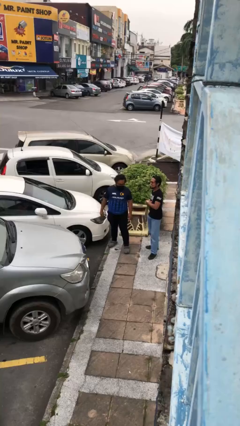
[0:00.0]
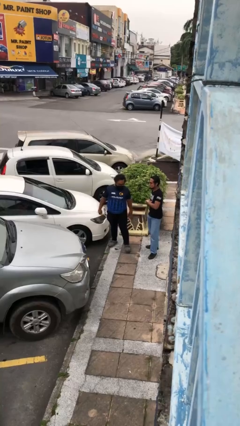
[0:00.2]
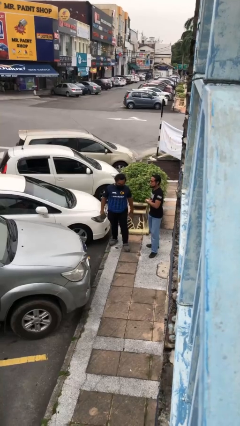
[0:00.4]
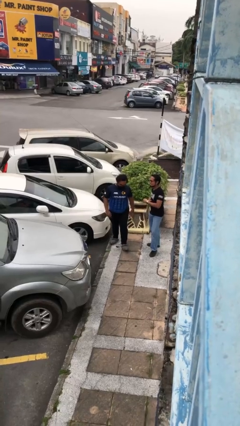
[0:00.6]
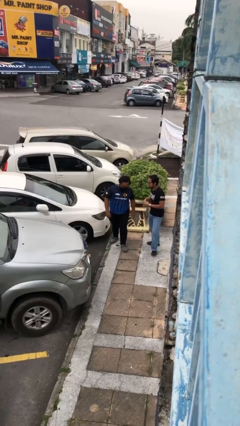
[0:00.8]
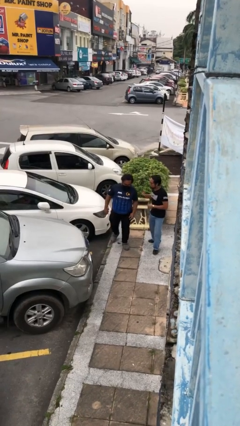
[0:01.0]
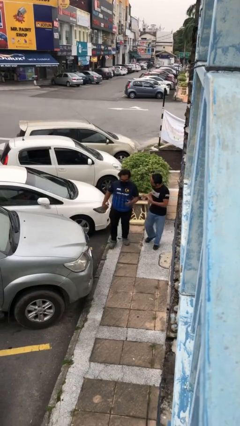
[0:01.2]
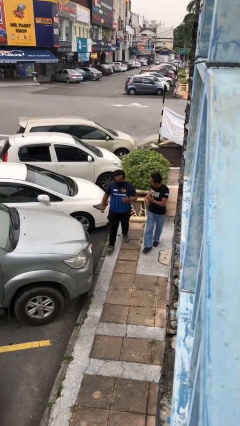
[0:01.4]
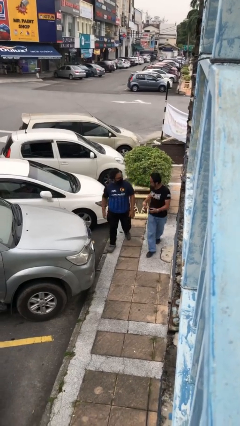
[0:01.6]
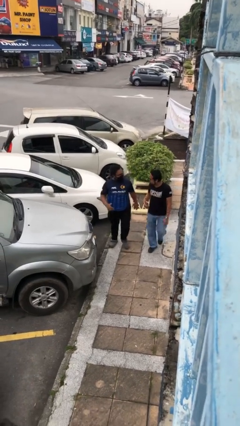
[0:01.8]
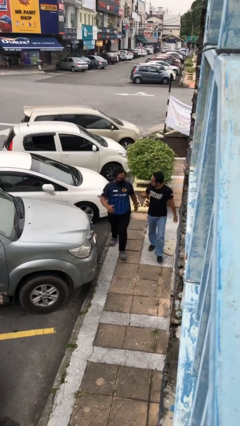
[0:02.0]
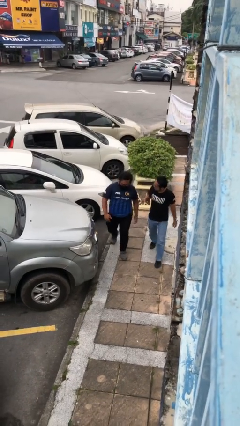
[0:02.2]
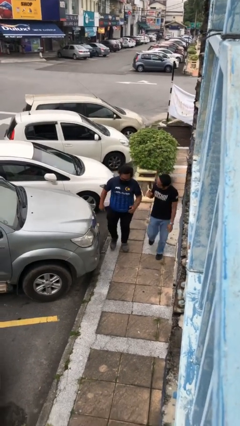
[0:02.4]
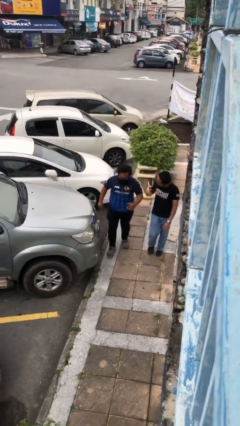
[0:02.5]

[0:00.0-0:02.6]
person talks to person

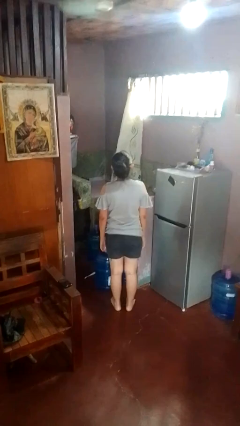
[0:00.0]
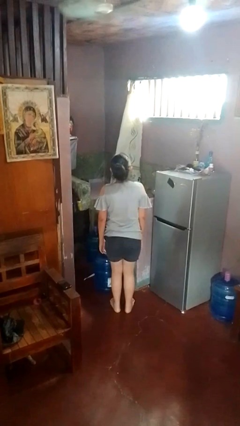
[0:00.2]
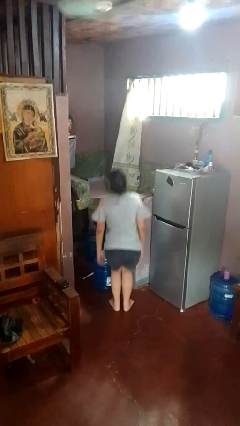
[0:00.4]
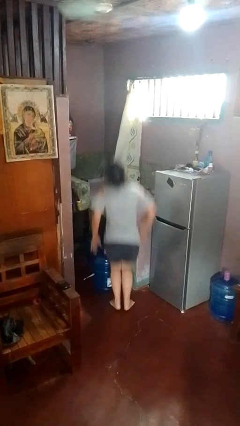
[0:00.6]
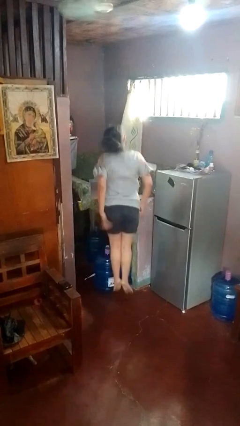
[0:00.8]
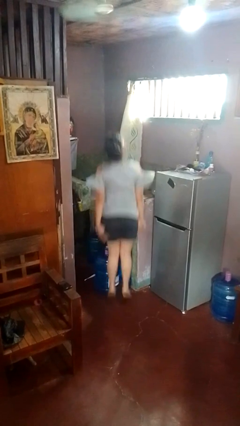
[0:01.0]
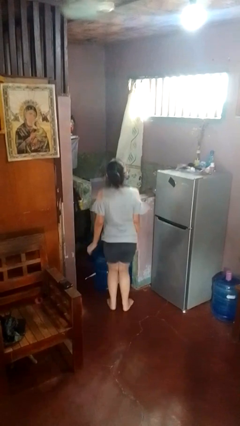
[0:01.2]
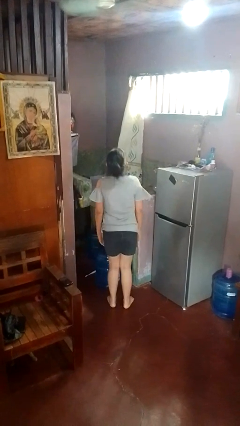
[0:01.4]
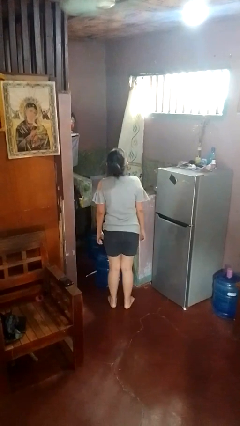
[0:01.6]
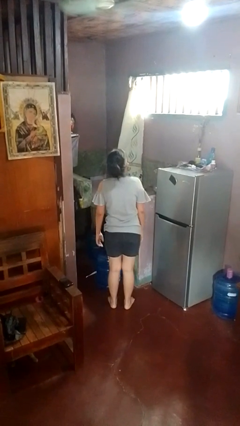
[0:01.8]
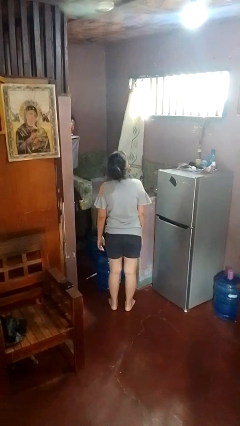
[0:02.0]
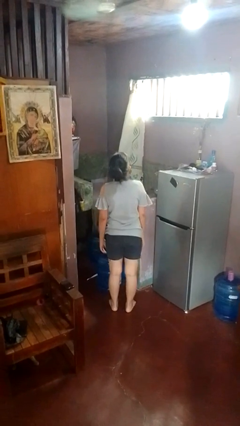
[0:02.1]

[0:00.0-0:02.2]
person jumps

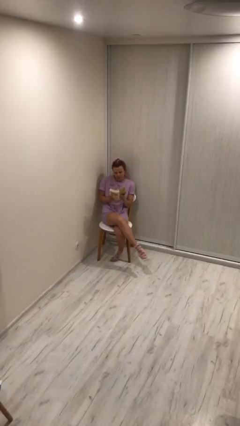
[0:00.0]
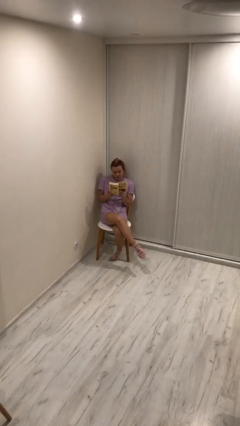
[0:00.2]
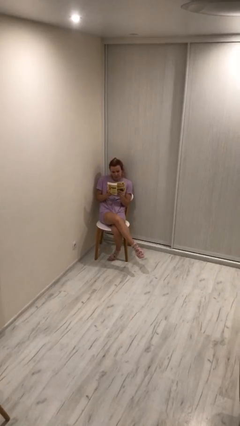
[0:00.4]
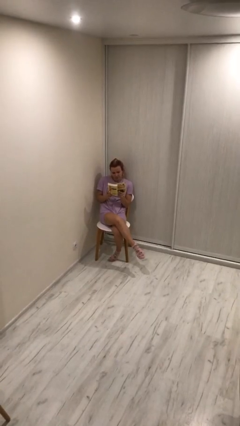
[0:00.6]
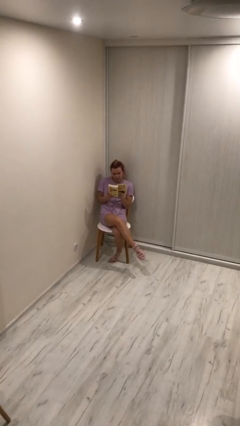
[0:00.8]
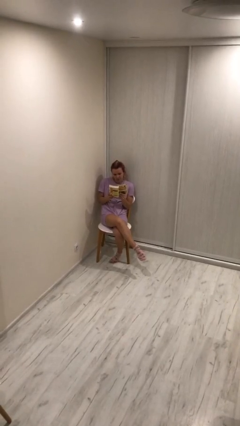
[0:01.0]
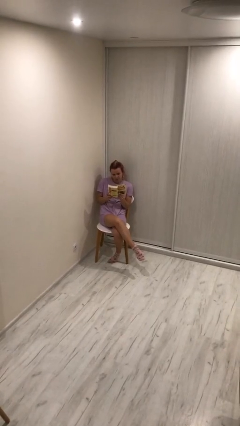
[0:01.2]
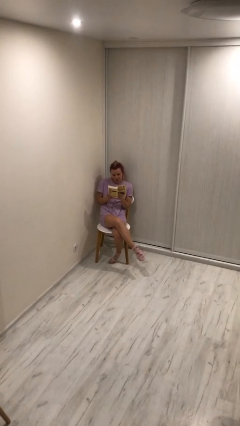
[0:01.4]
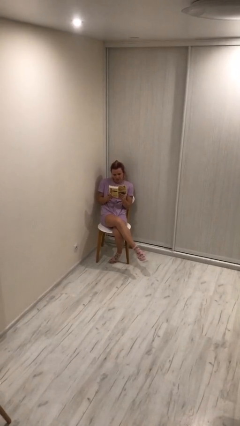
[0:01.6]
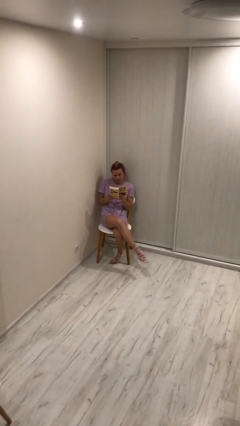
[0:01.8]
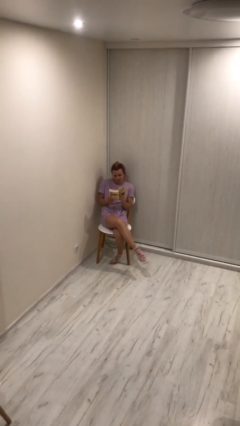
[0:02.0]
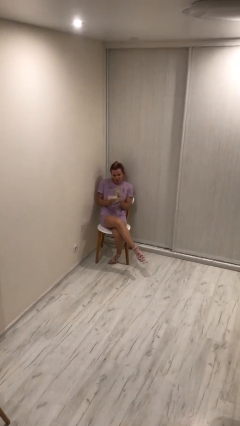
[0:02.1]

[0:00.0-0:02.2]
person reads book

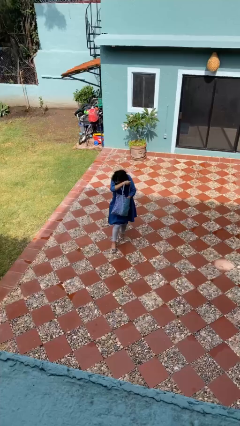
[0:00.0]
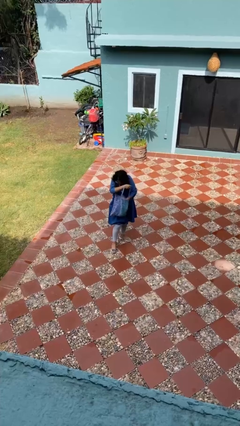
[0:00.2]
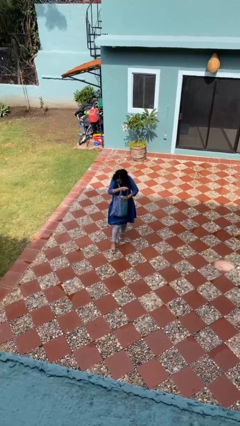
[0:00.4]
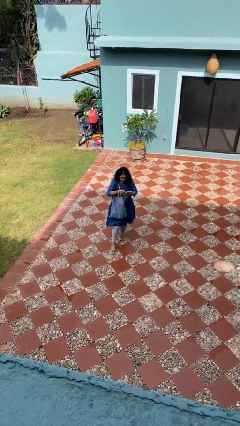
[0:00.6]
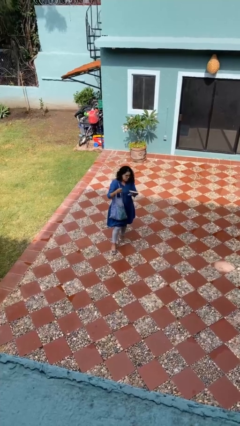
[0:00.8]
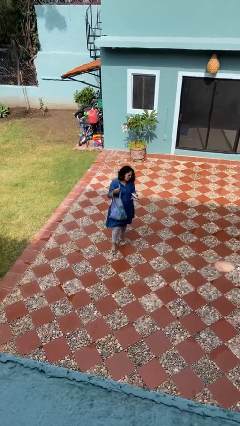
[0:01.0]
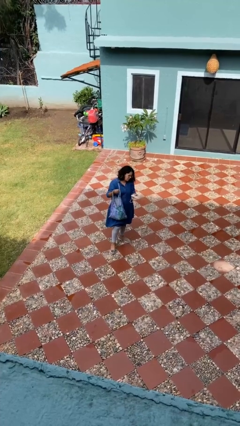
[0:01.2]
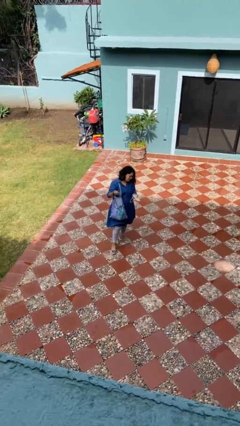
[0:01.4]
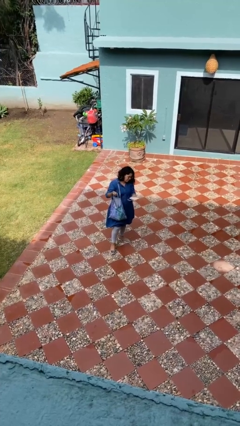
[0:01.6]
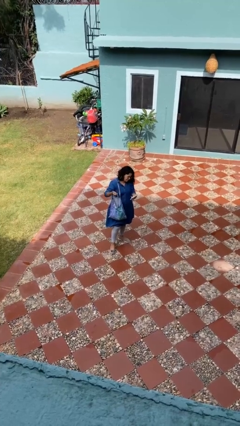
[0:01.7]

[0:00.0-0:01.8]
person takes object from purse

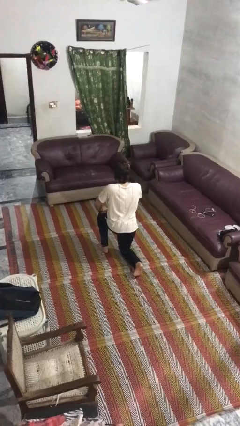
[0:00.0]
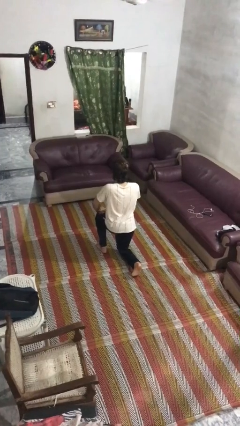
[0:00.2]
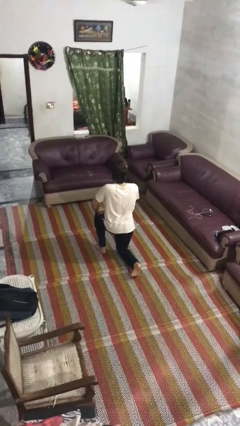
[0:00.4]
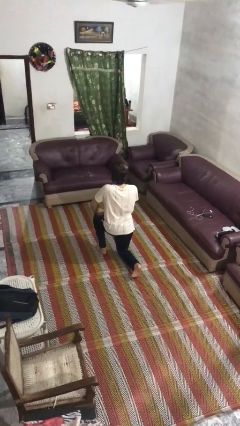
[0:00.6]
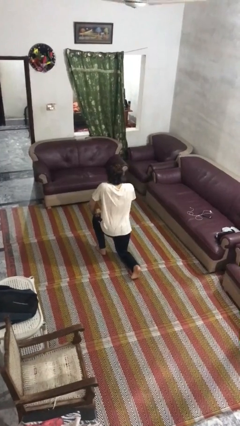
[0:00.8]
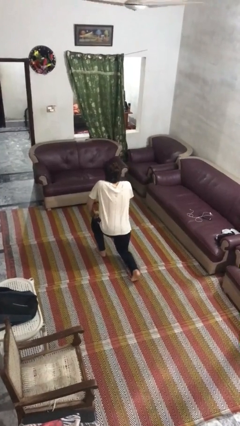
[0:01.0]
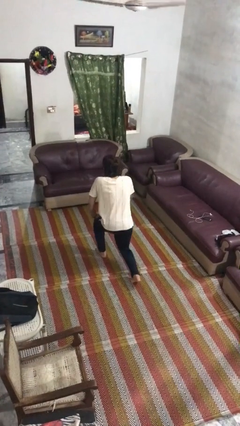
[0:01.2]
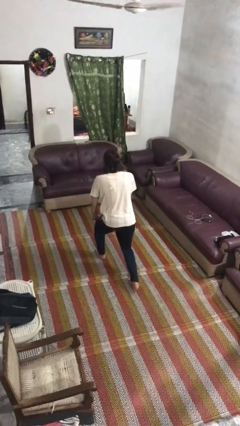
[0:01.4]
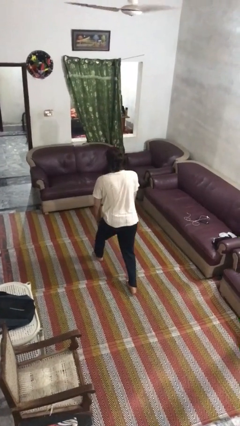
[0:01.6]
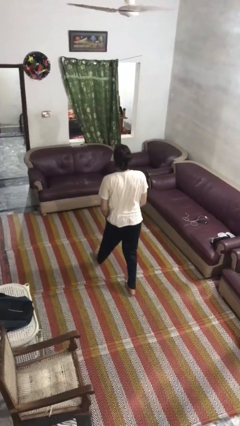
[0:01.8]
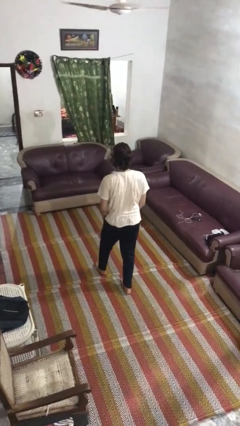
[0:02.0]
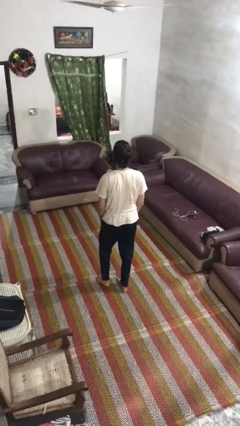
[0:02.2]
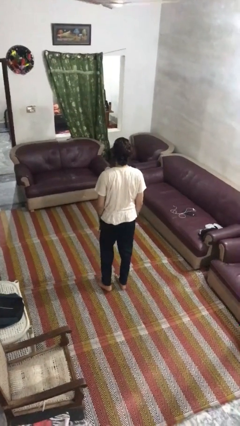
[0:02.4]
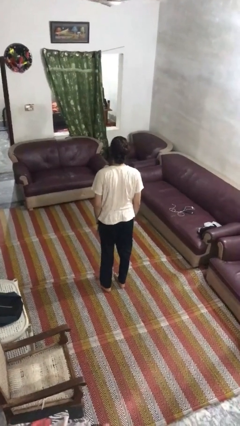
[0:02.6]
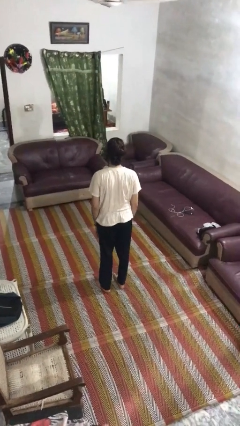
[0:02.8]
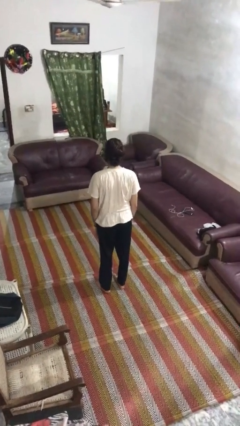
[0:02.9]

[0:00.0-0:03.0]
person stands up from floor

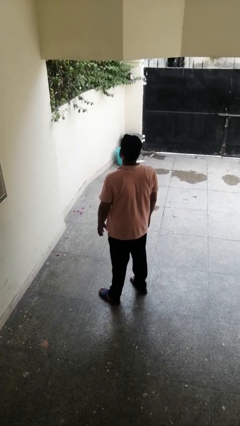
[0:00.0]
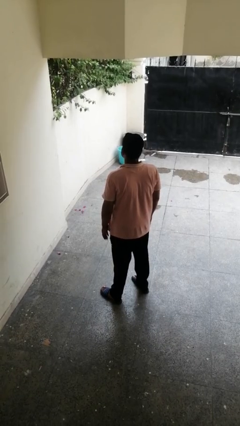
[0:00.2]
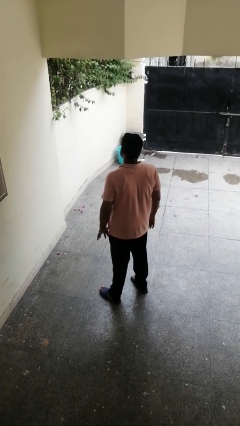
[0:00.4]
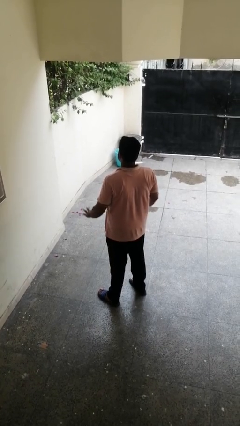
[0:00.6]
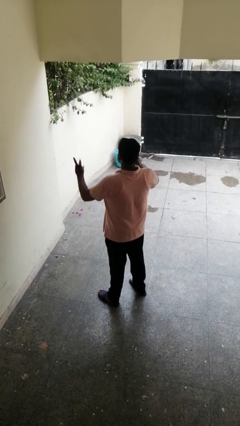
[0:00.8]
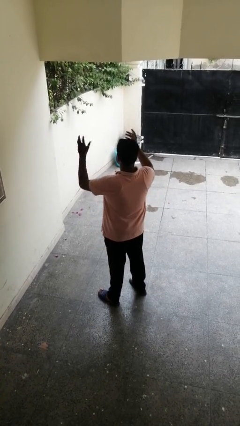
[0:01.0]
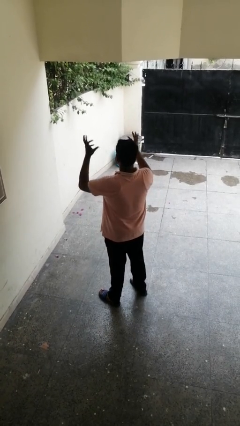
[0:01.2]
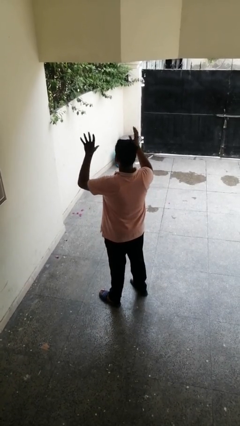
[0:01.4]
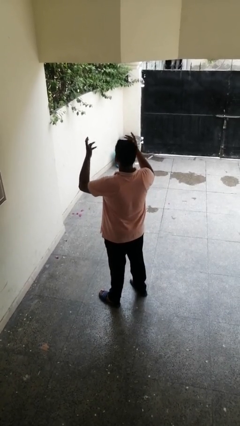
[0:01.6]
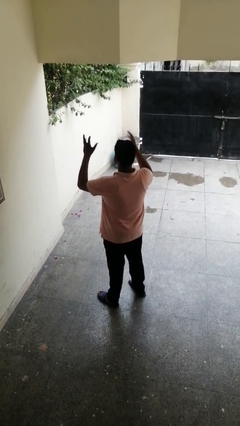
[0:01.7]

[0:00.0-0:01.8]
person dances in place

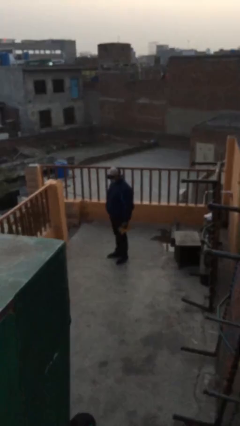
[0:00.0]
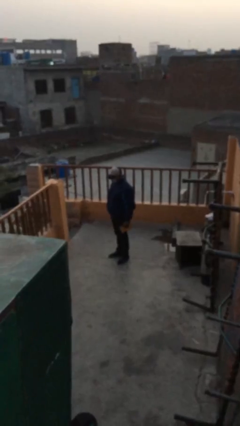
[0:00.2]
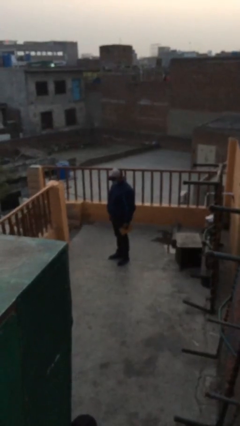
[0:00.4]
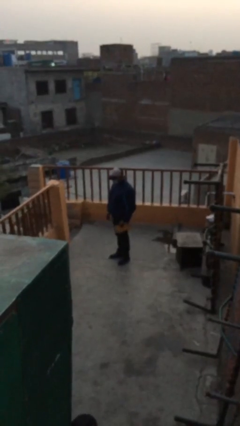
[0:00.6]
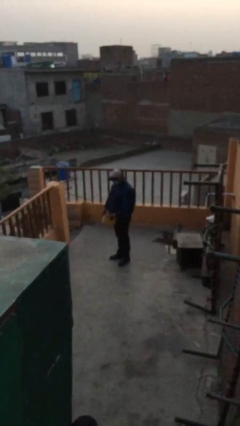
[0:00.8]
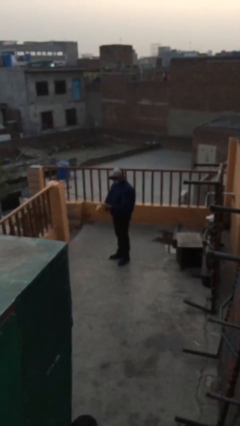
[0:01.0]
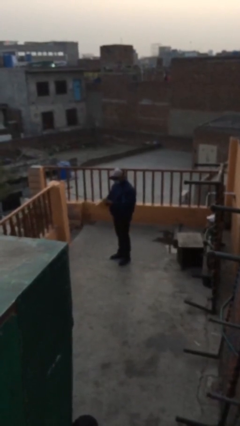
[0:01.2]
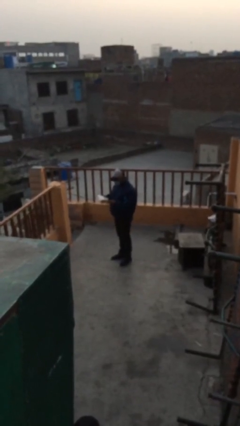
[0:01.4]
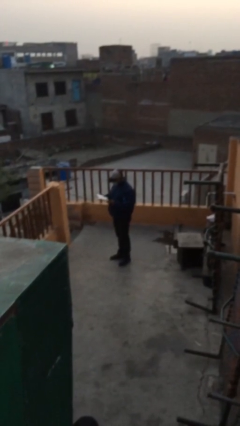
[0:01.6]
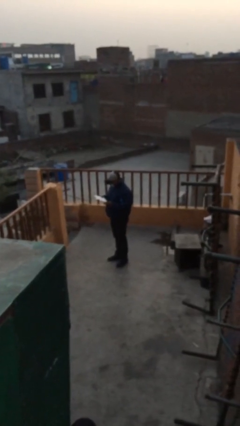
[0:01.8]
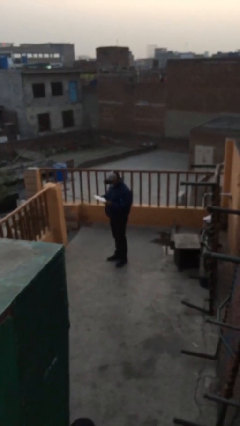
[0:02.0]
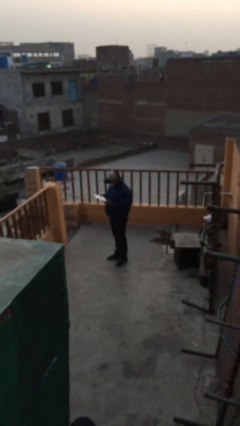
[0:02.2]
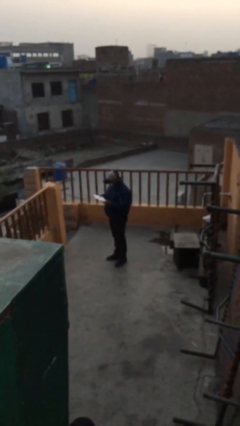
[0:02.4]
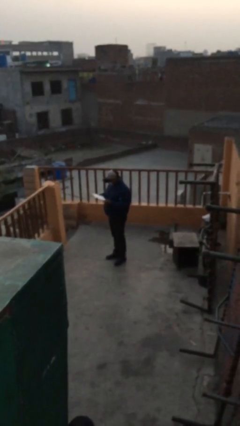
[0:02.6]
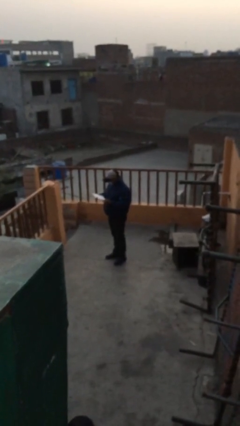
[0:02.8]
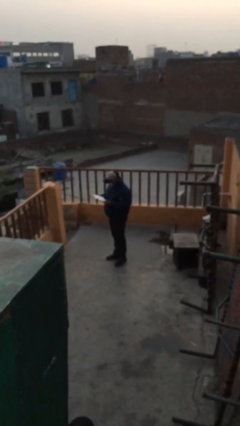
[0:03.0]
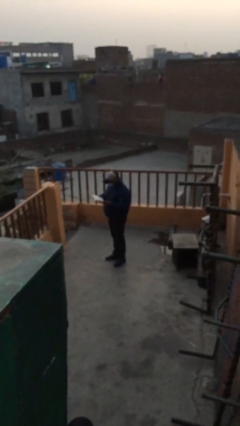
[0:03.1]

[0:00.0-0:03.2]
person reads document
